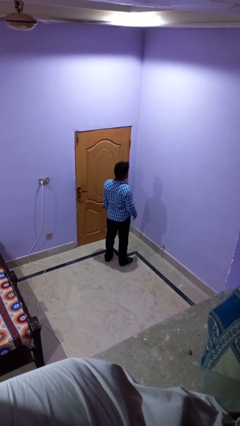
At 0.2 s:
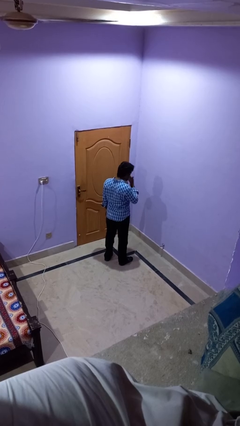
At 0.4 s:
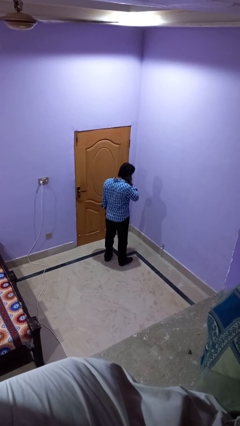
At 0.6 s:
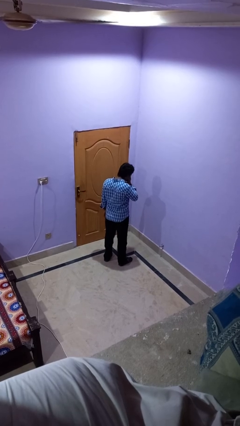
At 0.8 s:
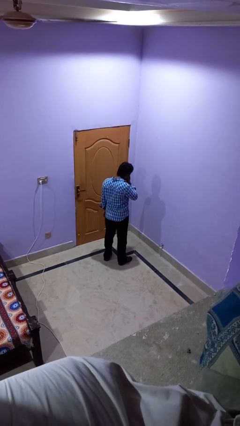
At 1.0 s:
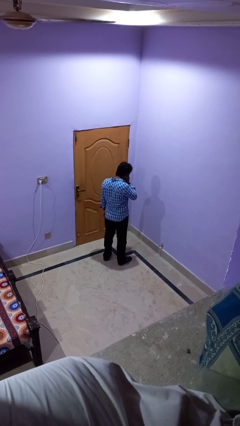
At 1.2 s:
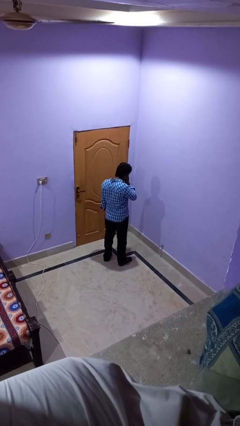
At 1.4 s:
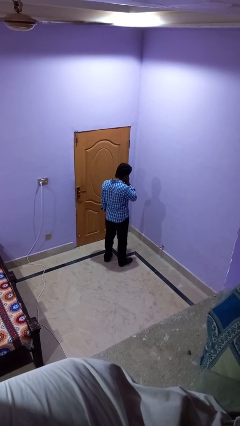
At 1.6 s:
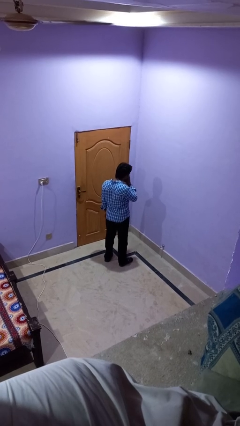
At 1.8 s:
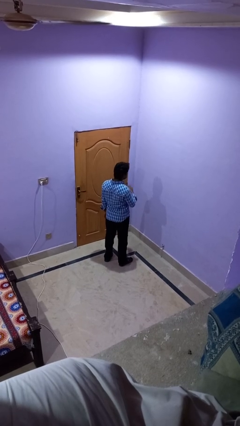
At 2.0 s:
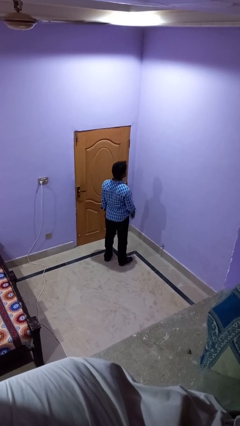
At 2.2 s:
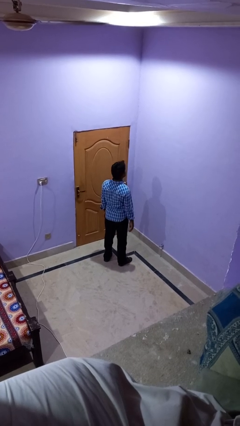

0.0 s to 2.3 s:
person sneezes into hand

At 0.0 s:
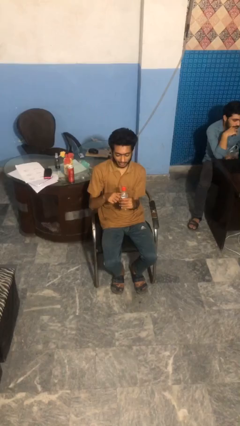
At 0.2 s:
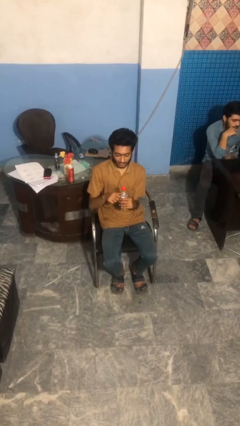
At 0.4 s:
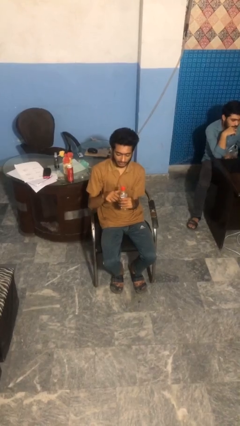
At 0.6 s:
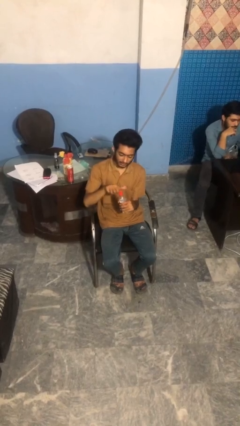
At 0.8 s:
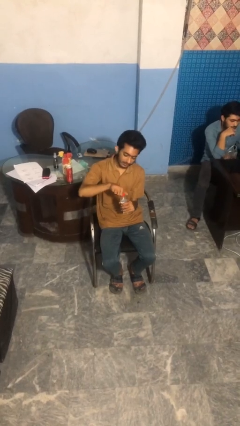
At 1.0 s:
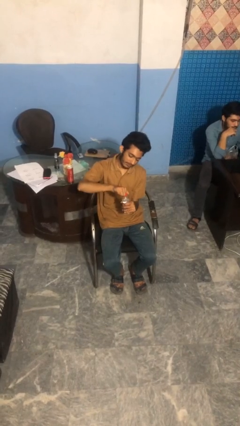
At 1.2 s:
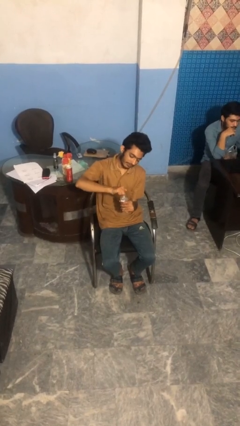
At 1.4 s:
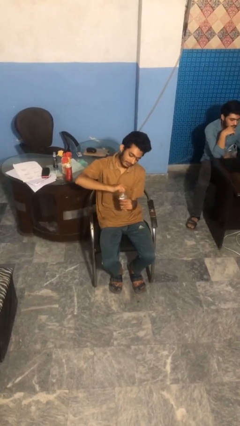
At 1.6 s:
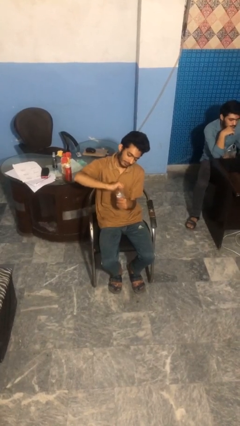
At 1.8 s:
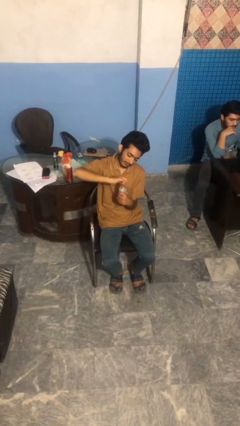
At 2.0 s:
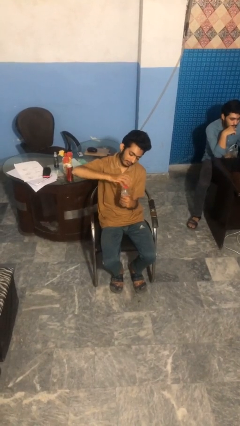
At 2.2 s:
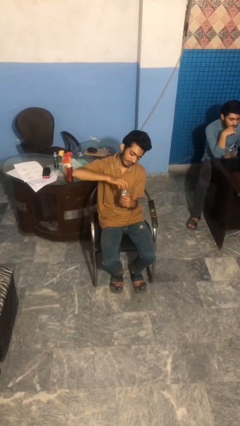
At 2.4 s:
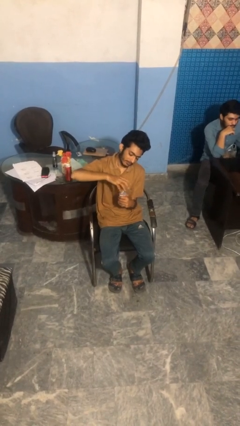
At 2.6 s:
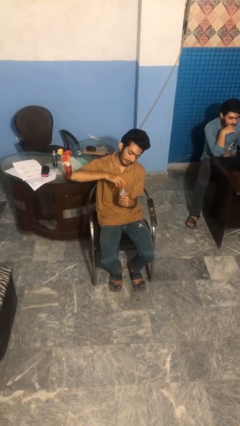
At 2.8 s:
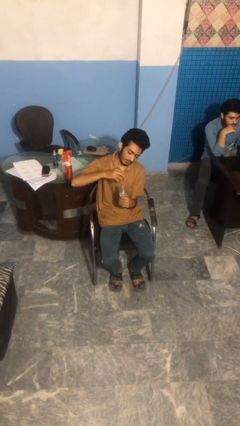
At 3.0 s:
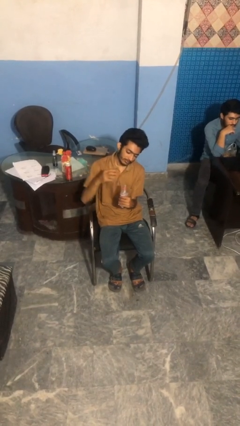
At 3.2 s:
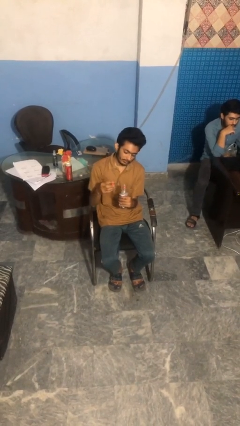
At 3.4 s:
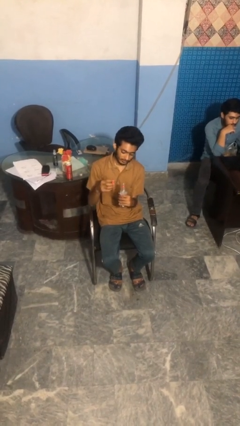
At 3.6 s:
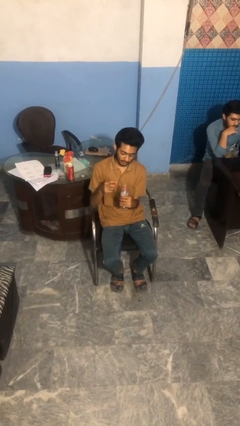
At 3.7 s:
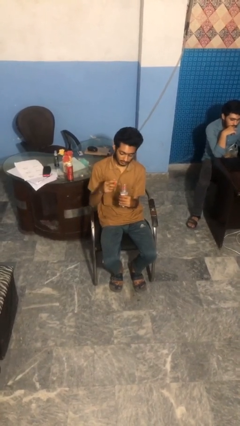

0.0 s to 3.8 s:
person unscrews lid from bottle

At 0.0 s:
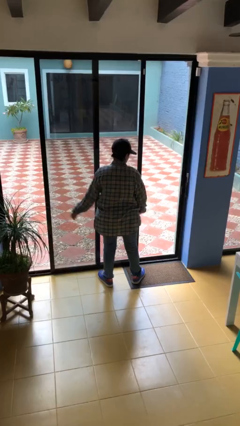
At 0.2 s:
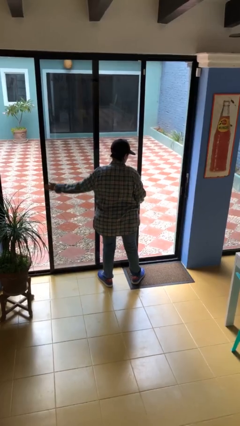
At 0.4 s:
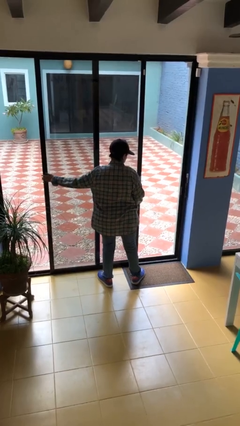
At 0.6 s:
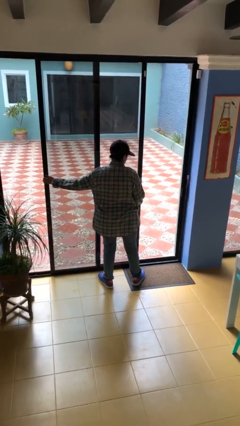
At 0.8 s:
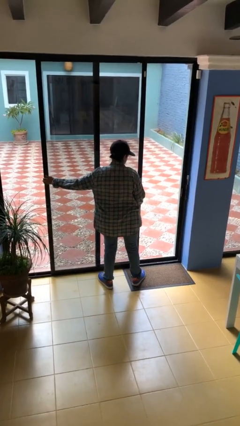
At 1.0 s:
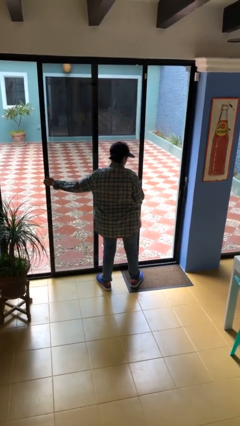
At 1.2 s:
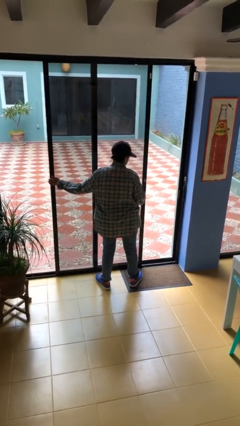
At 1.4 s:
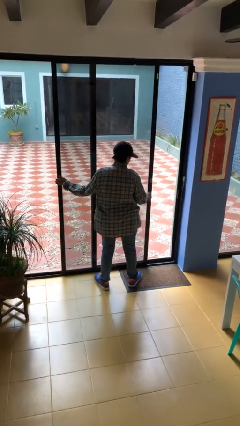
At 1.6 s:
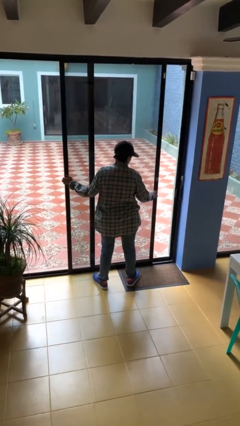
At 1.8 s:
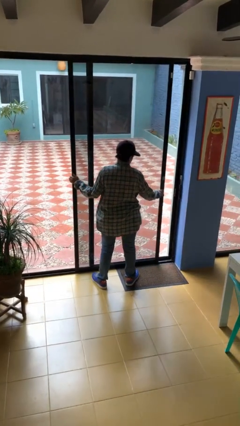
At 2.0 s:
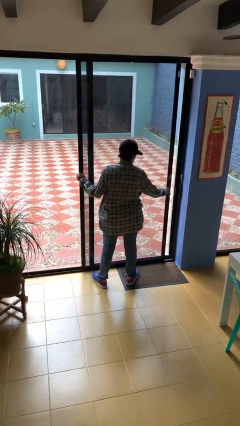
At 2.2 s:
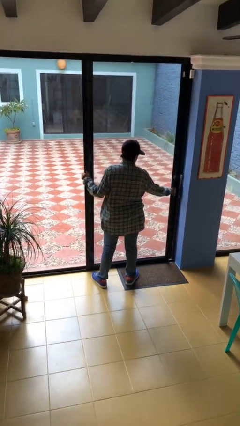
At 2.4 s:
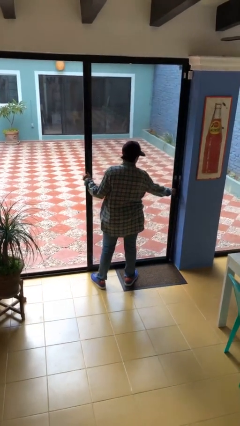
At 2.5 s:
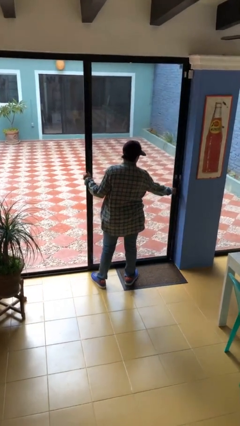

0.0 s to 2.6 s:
person closes sliding door

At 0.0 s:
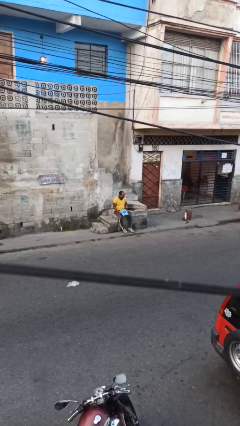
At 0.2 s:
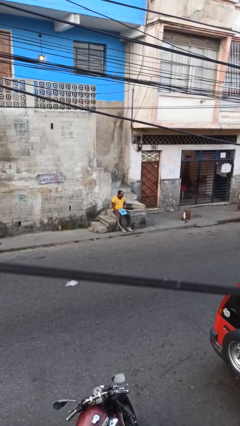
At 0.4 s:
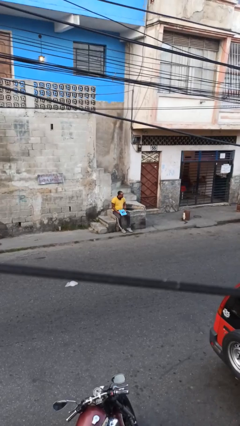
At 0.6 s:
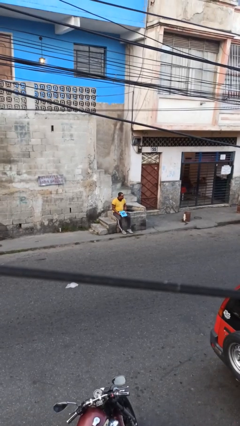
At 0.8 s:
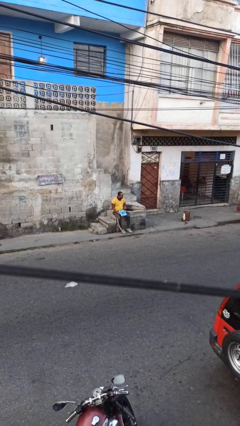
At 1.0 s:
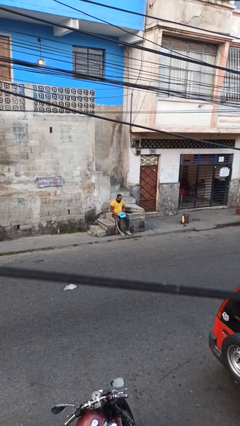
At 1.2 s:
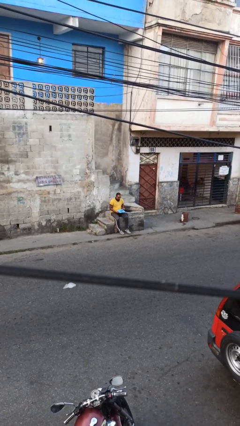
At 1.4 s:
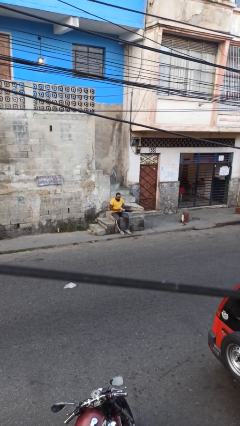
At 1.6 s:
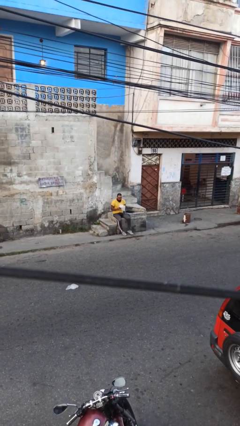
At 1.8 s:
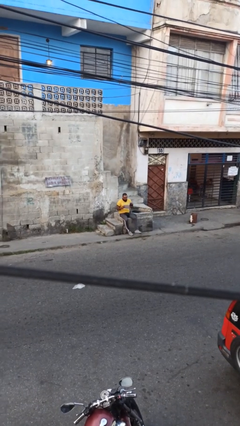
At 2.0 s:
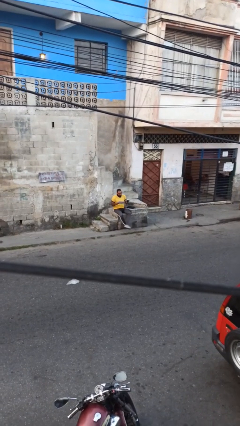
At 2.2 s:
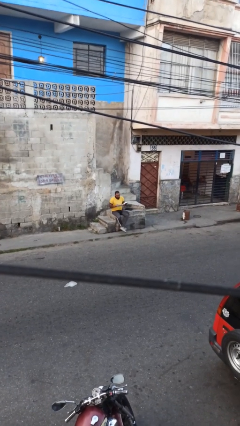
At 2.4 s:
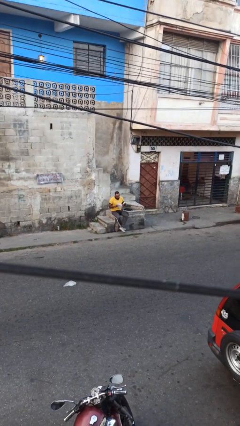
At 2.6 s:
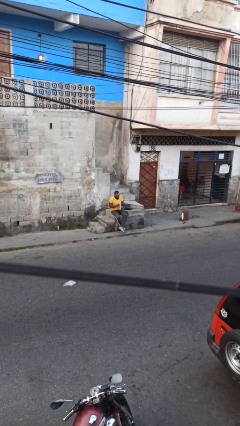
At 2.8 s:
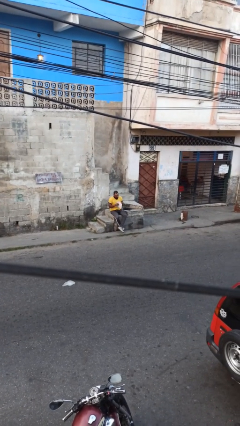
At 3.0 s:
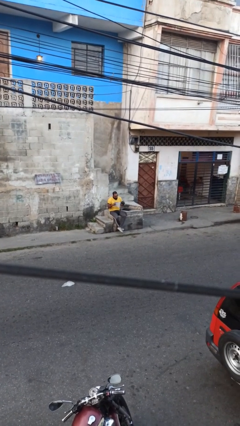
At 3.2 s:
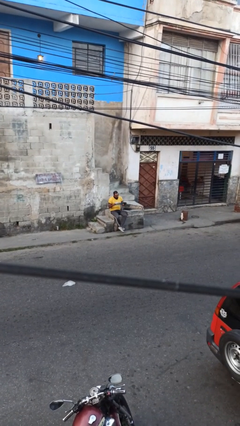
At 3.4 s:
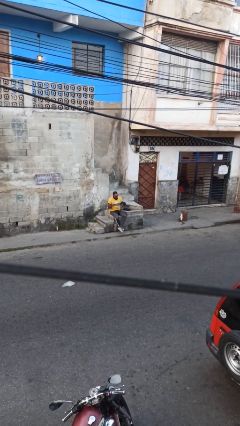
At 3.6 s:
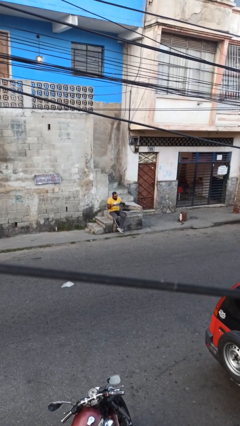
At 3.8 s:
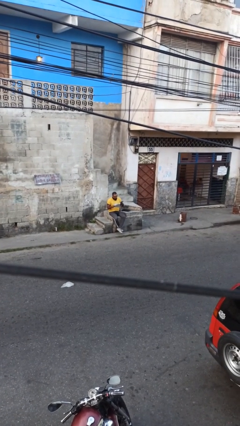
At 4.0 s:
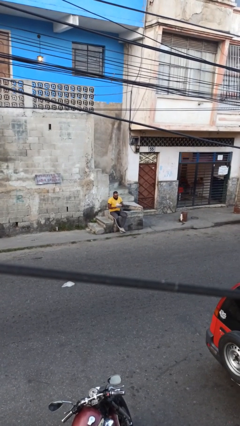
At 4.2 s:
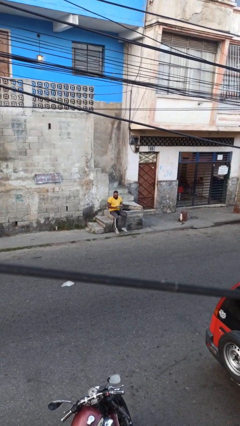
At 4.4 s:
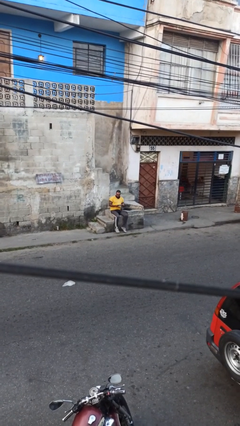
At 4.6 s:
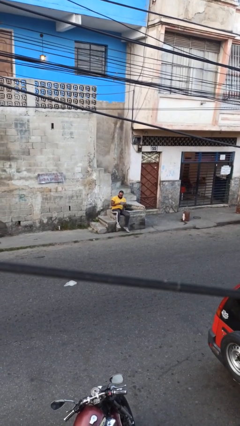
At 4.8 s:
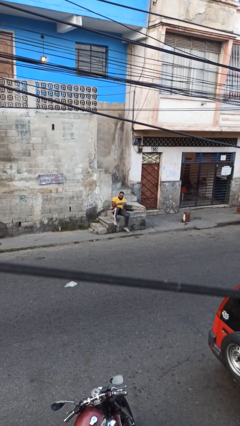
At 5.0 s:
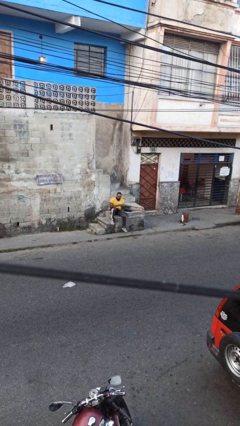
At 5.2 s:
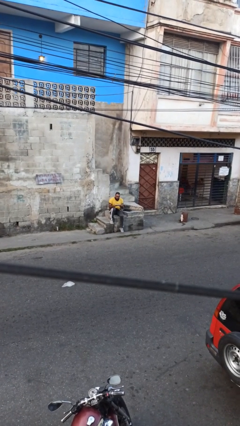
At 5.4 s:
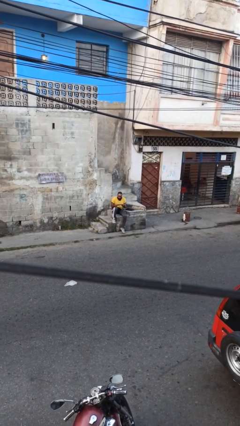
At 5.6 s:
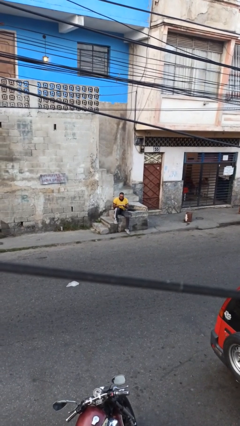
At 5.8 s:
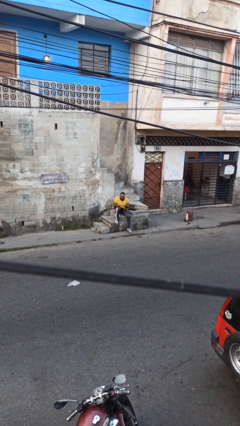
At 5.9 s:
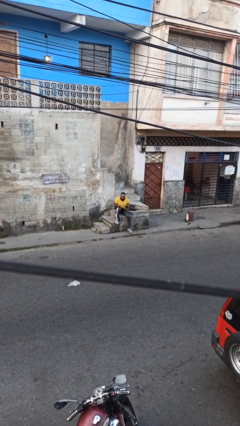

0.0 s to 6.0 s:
person reads document

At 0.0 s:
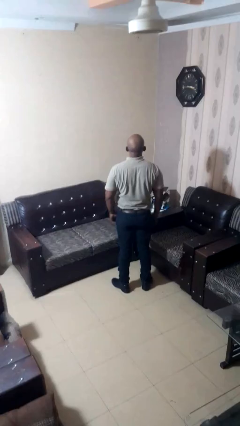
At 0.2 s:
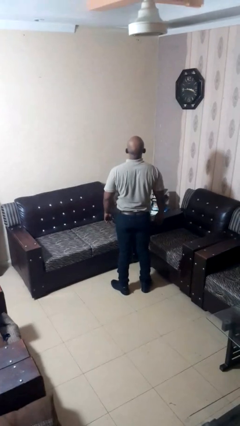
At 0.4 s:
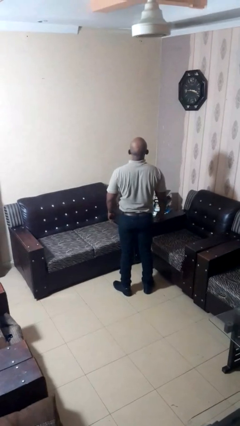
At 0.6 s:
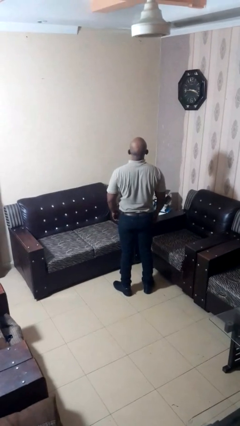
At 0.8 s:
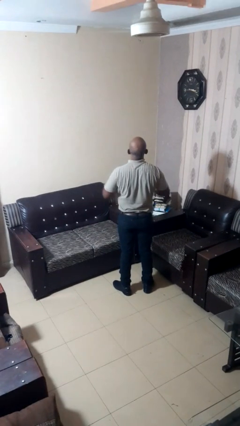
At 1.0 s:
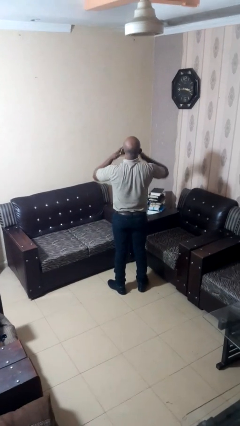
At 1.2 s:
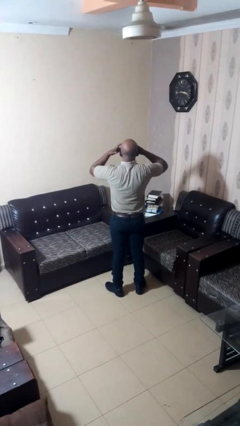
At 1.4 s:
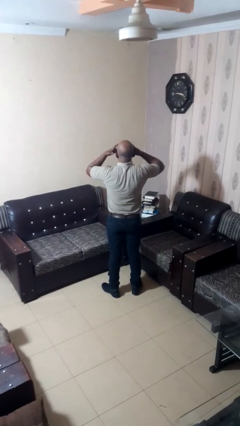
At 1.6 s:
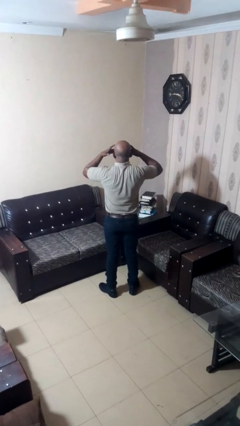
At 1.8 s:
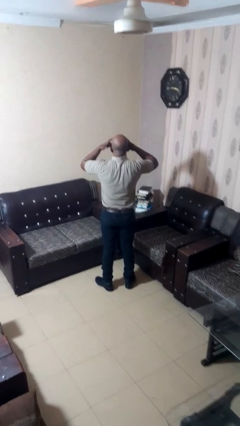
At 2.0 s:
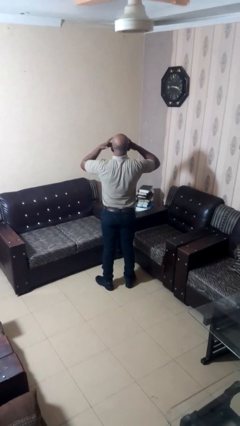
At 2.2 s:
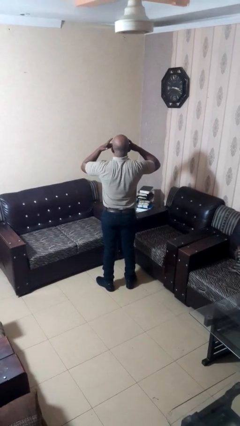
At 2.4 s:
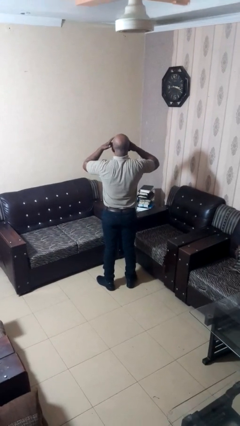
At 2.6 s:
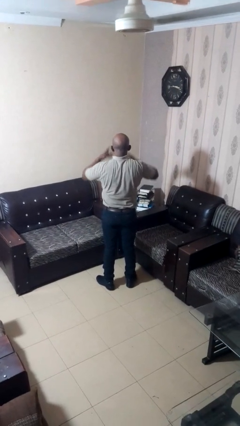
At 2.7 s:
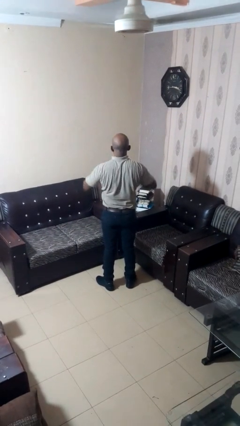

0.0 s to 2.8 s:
person rubs eyes
